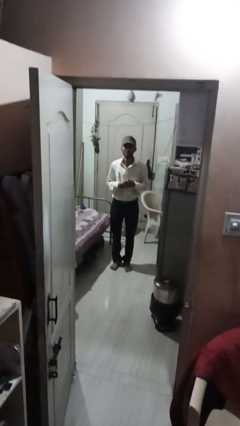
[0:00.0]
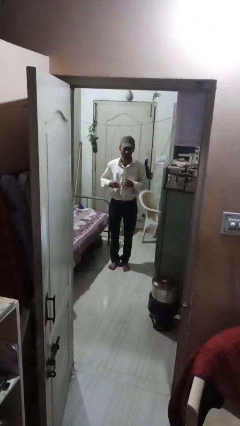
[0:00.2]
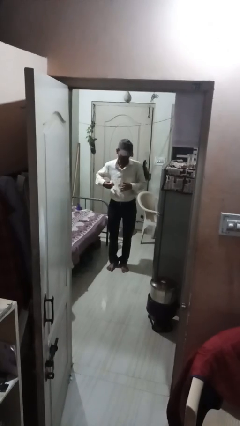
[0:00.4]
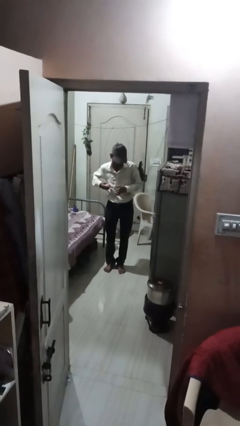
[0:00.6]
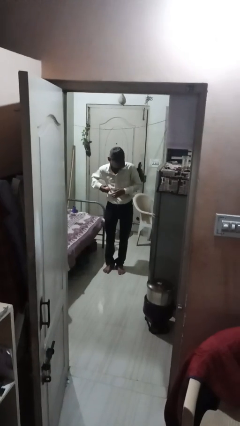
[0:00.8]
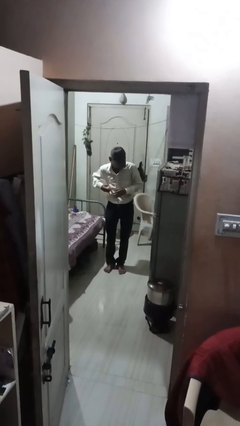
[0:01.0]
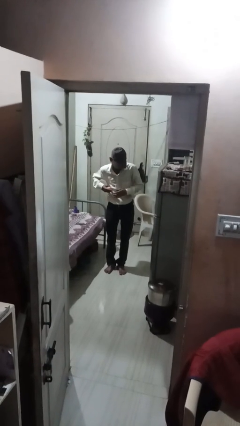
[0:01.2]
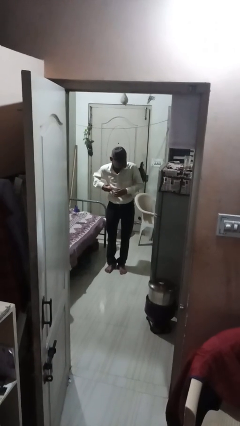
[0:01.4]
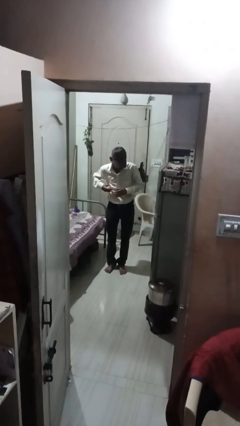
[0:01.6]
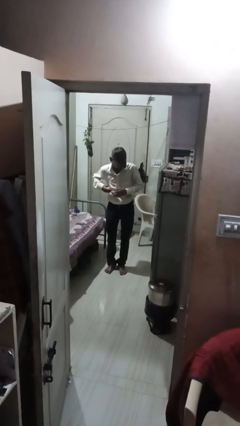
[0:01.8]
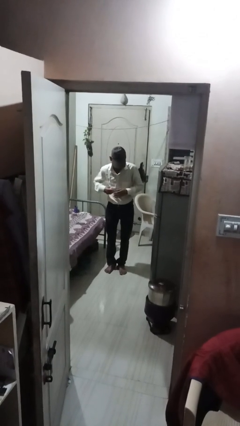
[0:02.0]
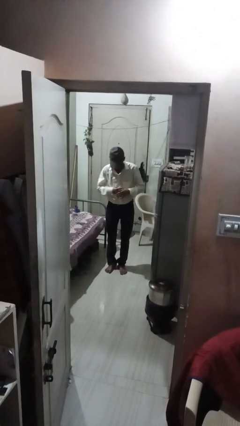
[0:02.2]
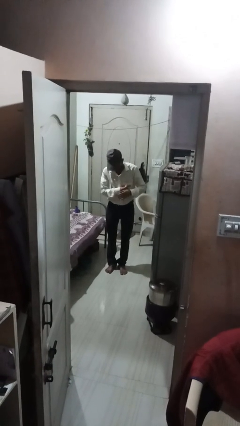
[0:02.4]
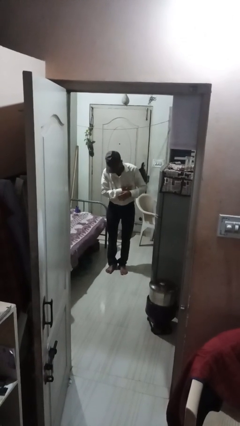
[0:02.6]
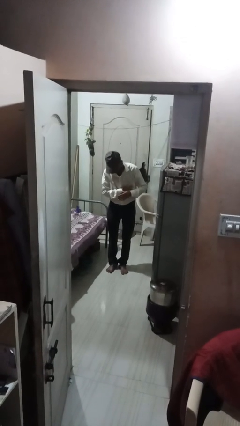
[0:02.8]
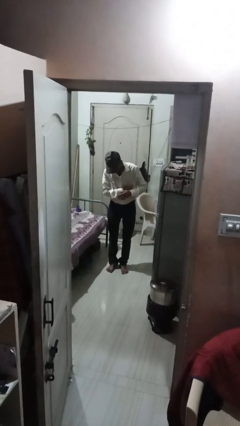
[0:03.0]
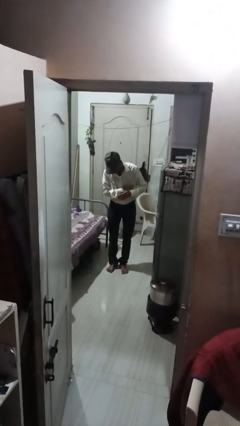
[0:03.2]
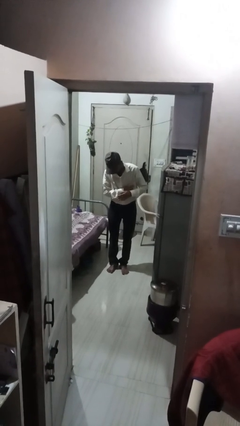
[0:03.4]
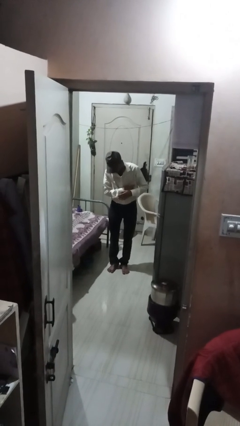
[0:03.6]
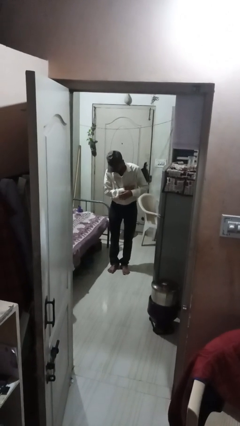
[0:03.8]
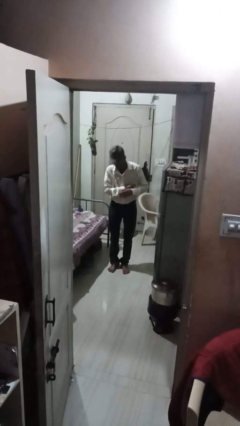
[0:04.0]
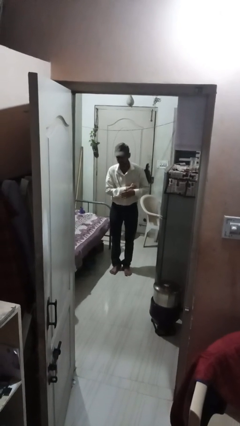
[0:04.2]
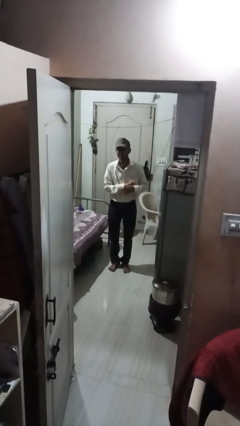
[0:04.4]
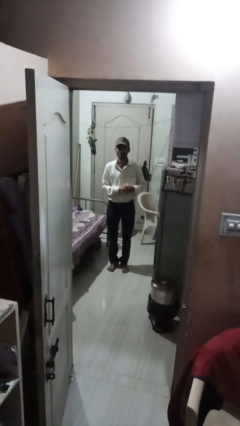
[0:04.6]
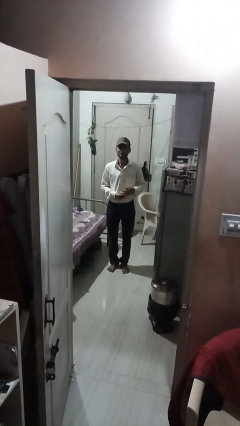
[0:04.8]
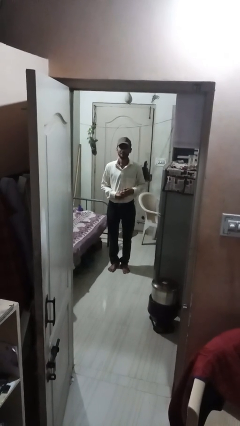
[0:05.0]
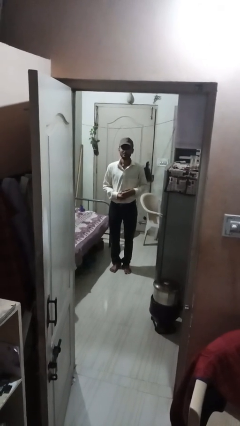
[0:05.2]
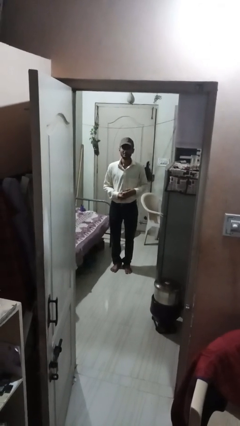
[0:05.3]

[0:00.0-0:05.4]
person applies deodorant

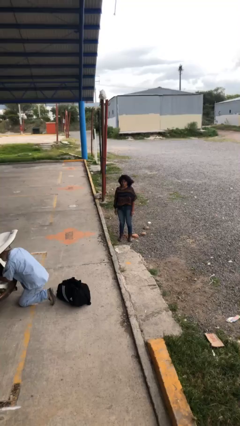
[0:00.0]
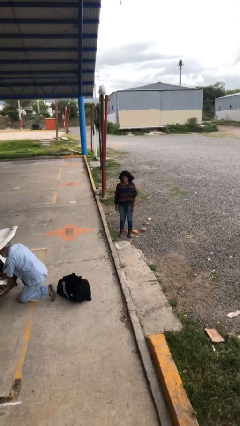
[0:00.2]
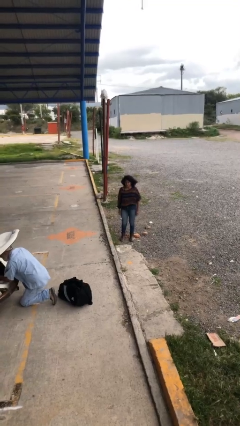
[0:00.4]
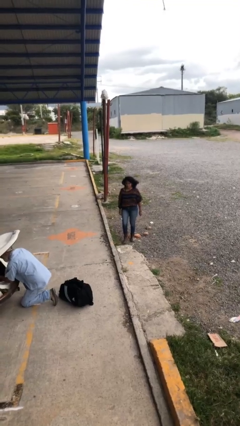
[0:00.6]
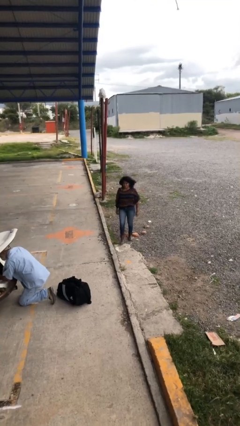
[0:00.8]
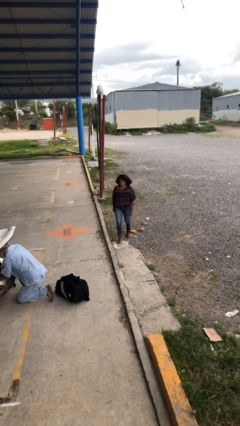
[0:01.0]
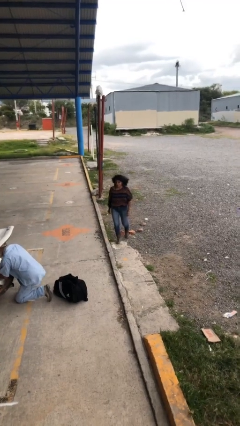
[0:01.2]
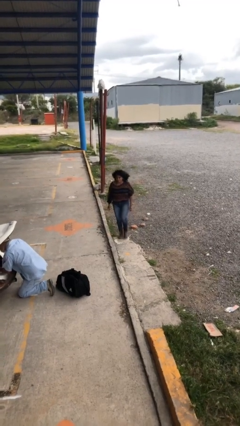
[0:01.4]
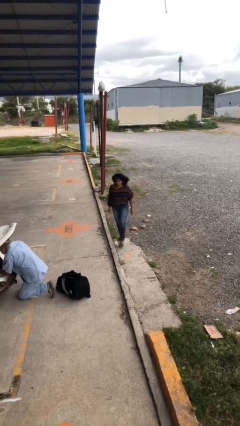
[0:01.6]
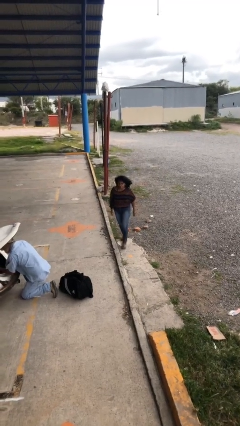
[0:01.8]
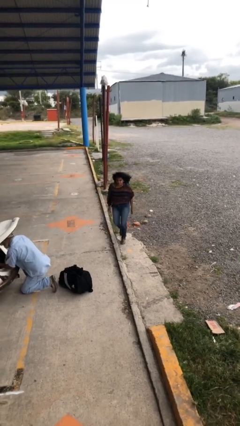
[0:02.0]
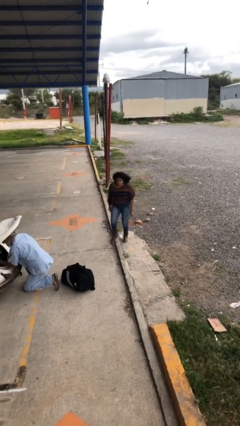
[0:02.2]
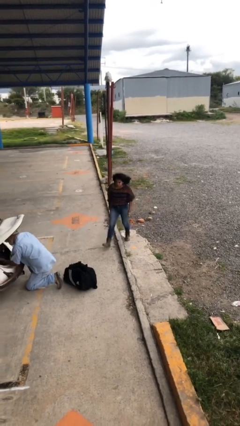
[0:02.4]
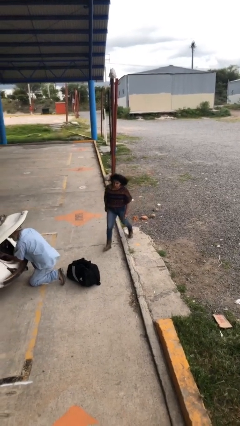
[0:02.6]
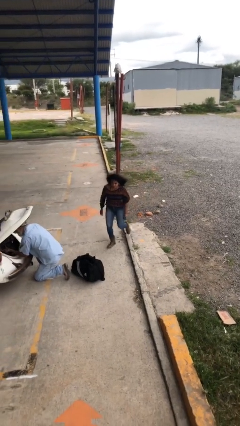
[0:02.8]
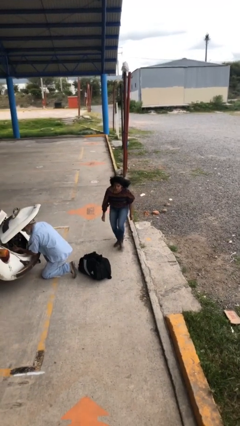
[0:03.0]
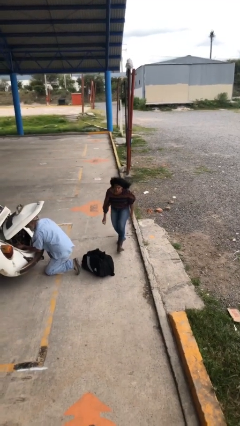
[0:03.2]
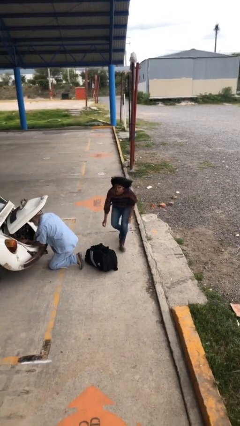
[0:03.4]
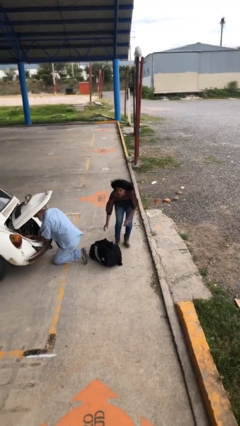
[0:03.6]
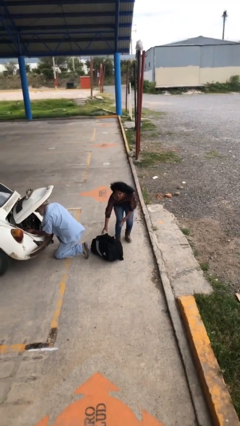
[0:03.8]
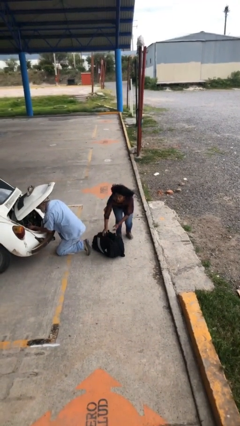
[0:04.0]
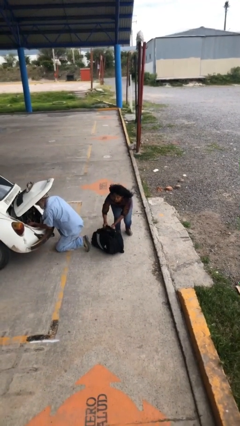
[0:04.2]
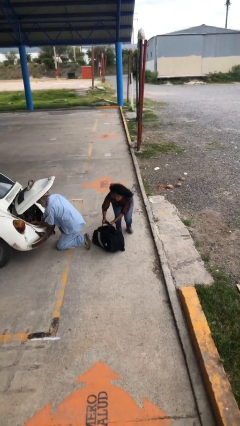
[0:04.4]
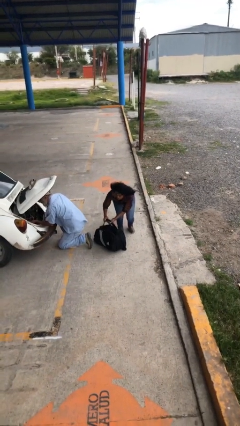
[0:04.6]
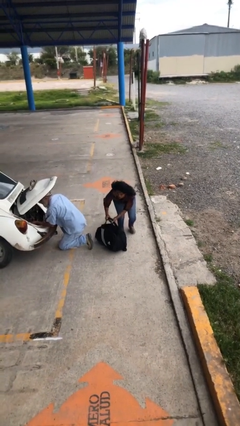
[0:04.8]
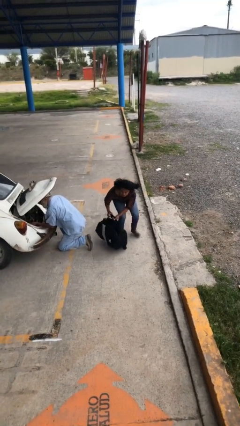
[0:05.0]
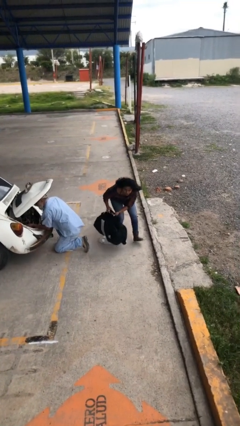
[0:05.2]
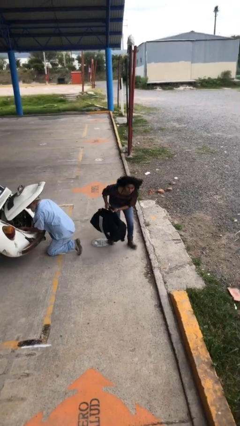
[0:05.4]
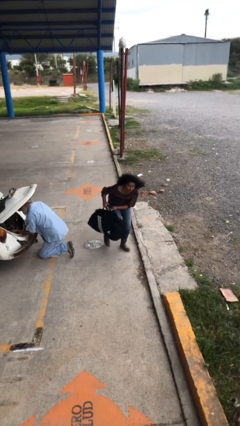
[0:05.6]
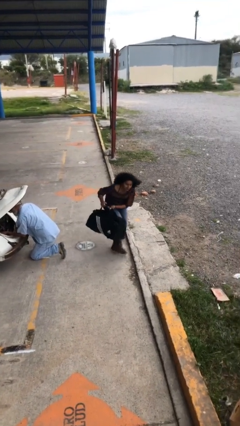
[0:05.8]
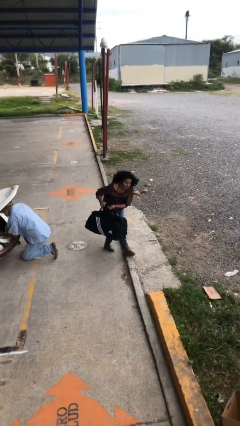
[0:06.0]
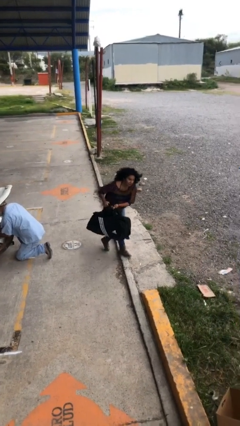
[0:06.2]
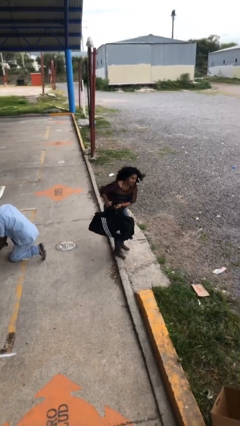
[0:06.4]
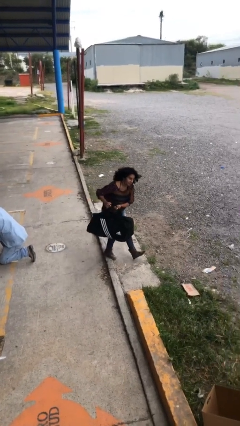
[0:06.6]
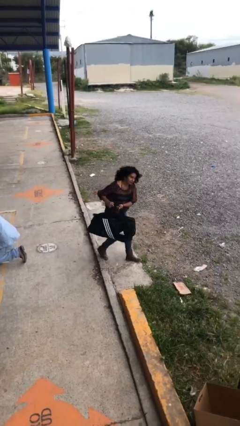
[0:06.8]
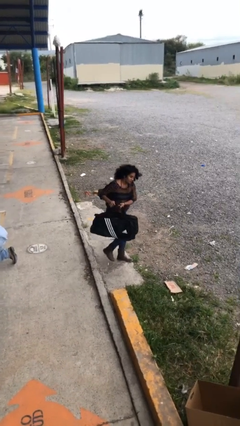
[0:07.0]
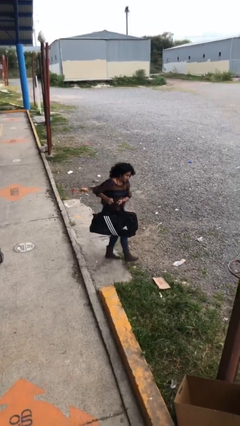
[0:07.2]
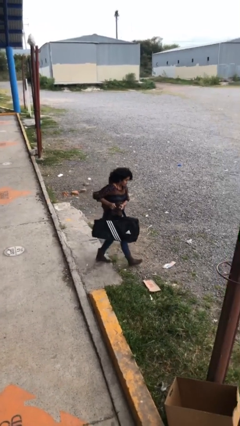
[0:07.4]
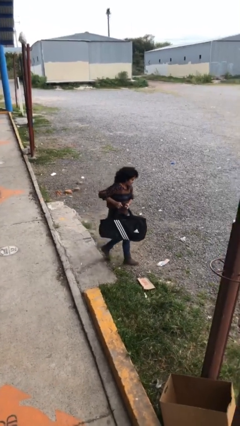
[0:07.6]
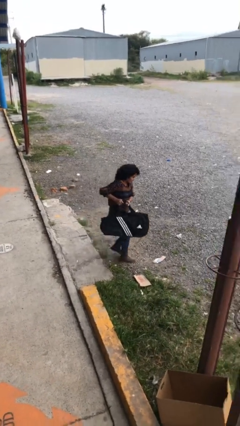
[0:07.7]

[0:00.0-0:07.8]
person steals object from person

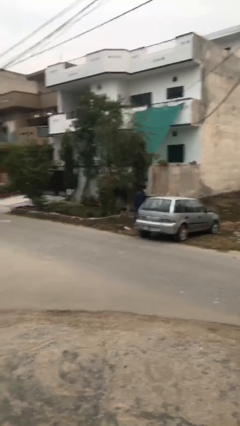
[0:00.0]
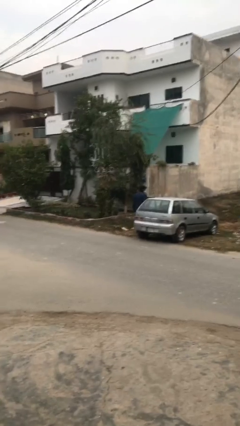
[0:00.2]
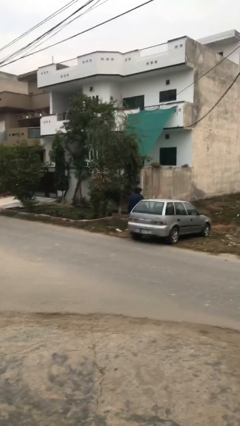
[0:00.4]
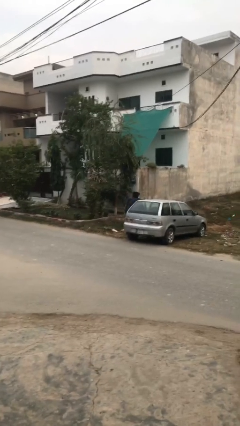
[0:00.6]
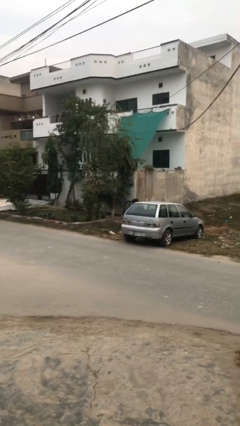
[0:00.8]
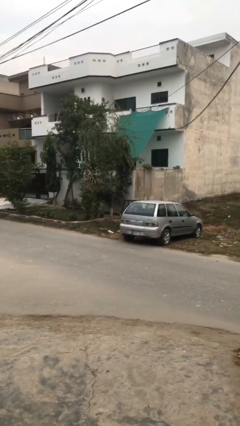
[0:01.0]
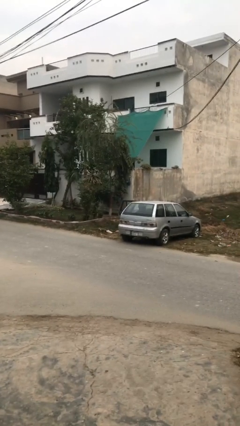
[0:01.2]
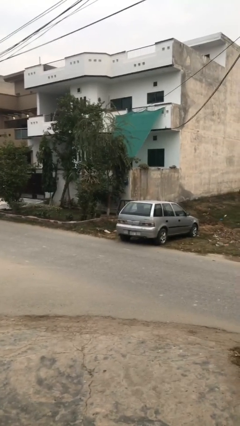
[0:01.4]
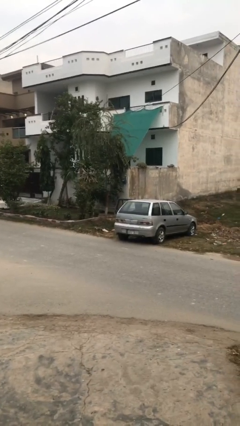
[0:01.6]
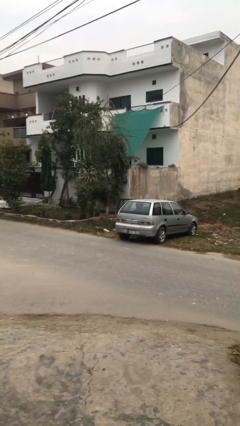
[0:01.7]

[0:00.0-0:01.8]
person enters car

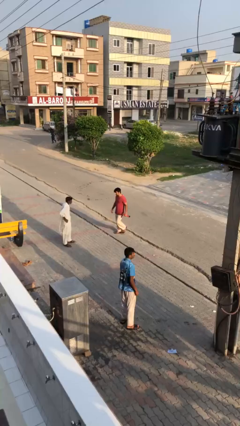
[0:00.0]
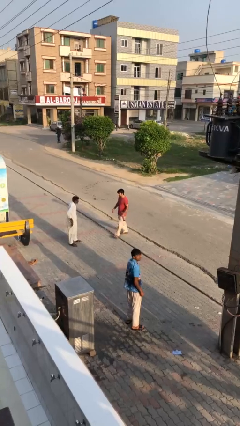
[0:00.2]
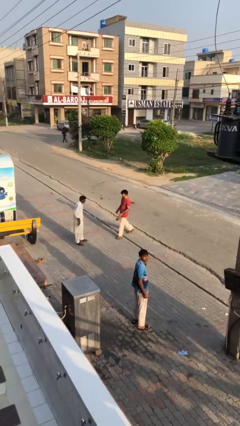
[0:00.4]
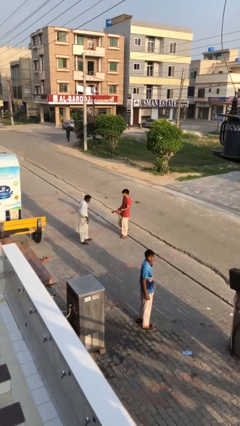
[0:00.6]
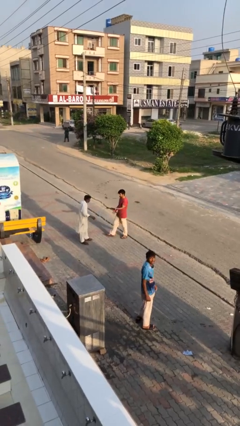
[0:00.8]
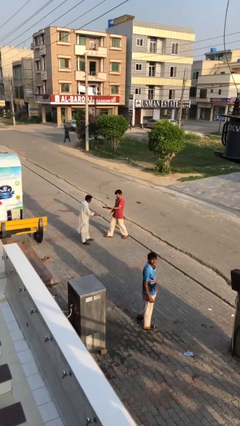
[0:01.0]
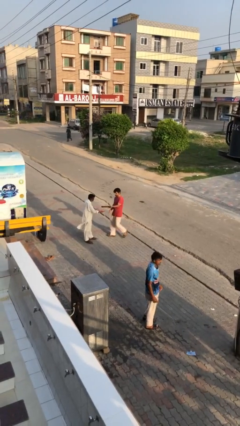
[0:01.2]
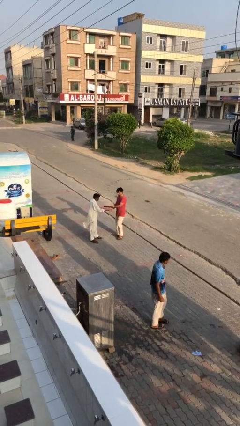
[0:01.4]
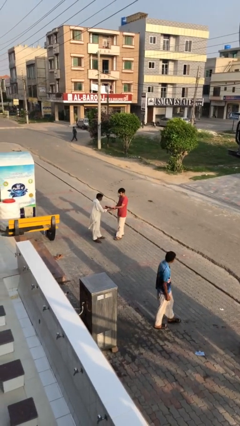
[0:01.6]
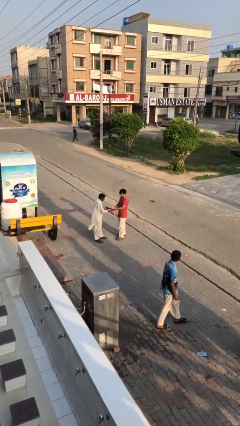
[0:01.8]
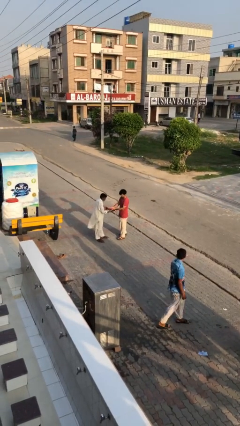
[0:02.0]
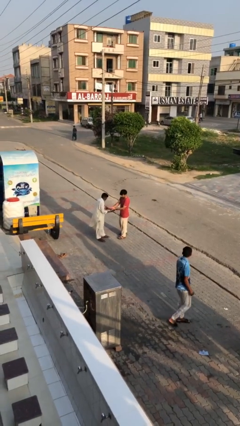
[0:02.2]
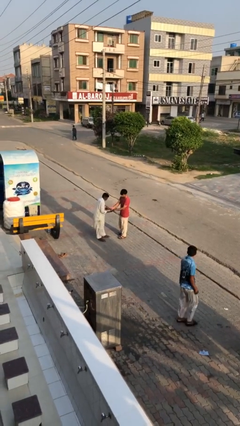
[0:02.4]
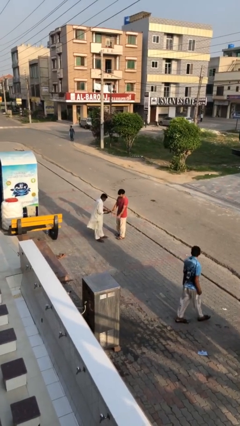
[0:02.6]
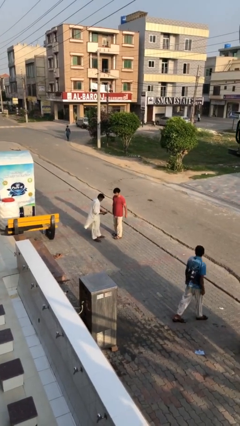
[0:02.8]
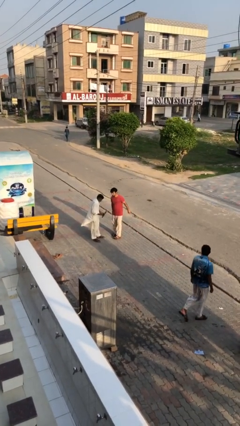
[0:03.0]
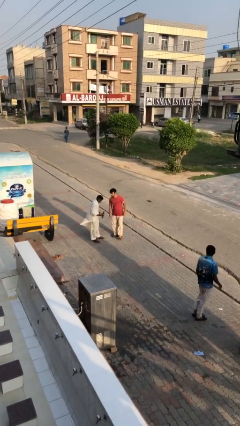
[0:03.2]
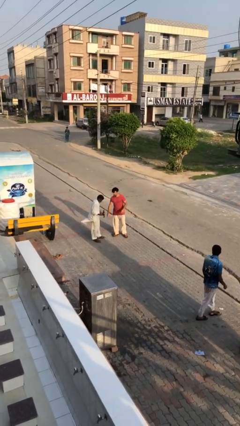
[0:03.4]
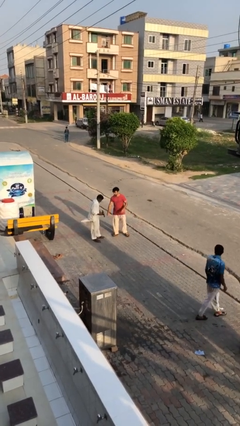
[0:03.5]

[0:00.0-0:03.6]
person transfers object to person
